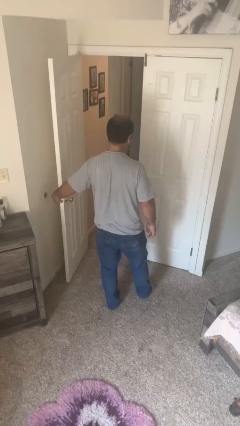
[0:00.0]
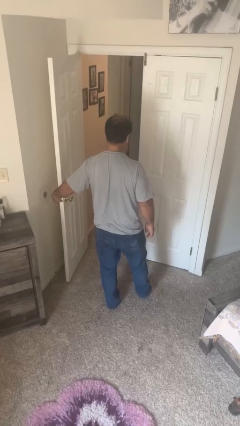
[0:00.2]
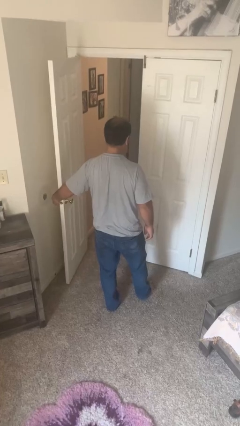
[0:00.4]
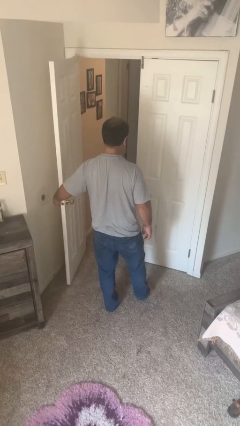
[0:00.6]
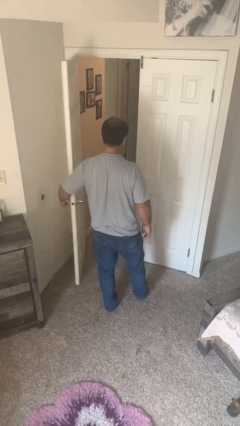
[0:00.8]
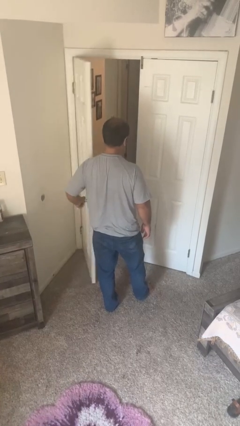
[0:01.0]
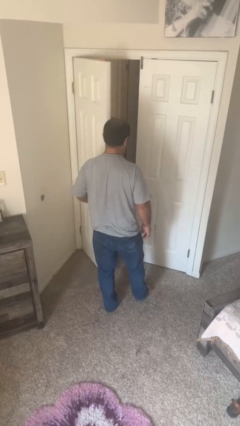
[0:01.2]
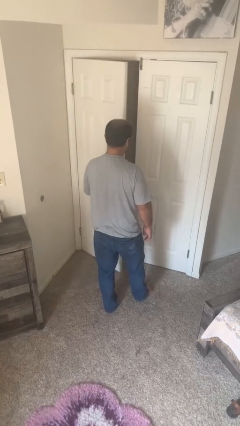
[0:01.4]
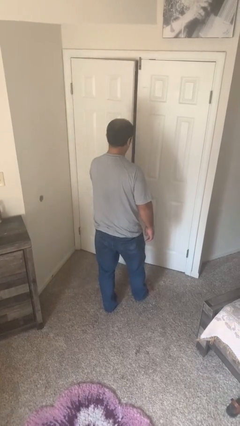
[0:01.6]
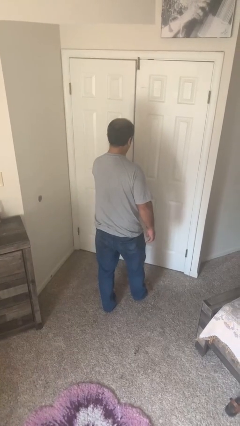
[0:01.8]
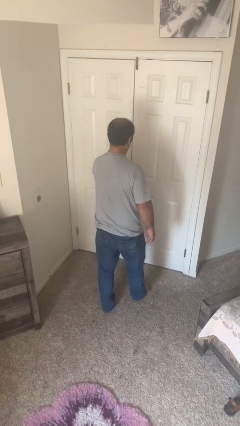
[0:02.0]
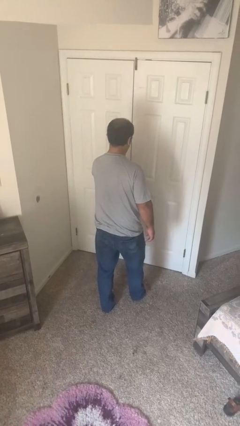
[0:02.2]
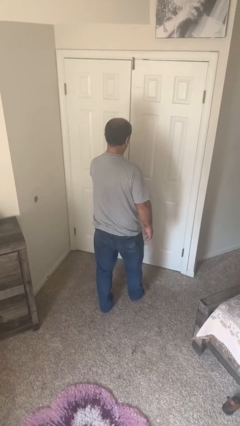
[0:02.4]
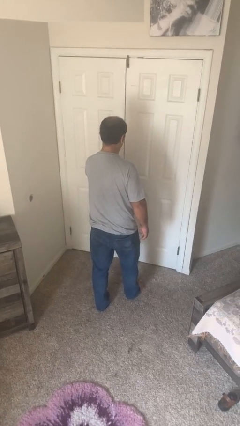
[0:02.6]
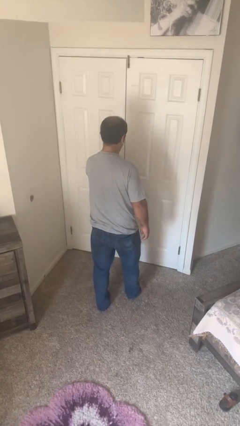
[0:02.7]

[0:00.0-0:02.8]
person closes facility door

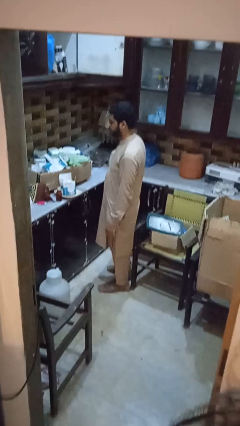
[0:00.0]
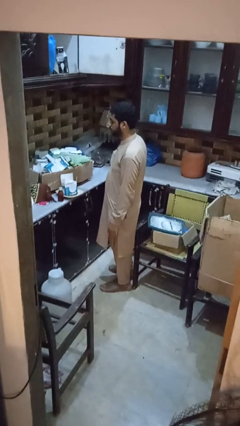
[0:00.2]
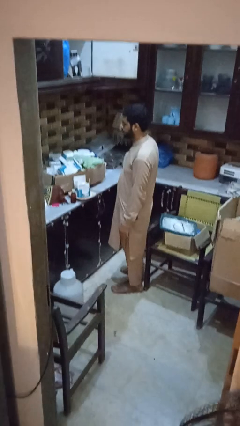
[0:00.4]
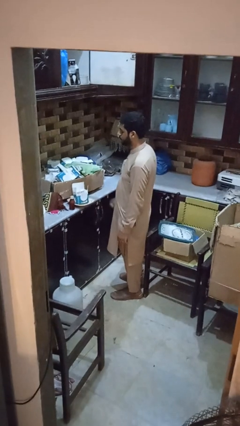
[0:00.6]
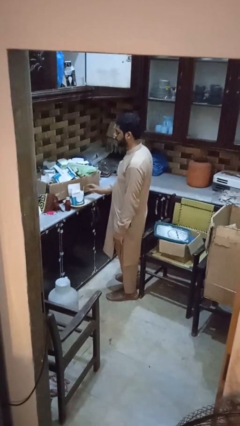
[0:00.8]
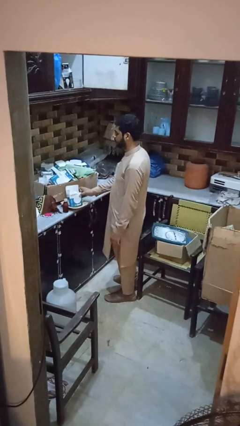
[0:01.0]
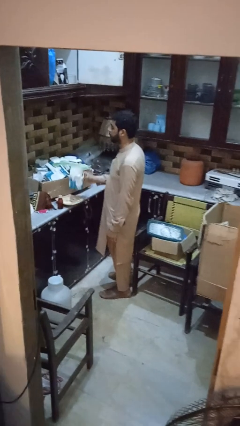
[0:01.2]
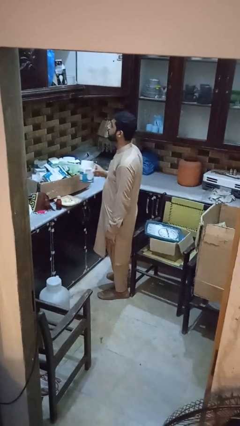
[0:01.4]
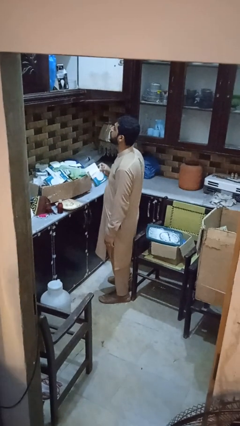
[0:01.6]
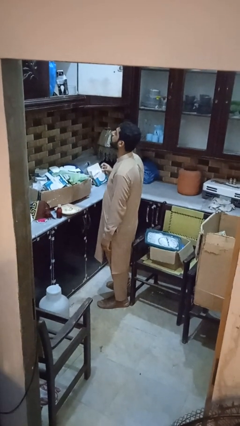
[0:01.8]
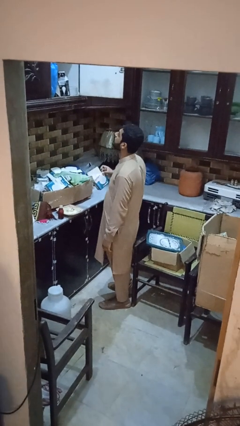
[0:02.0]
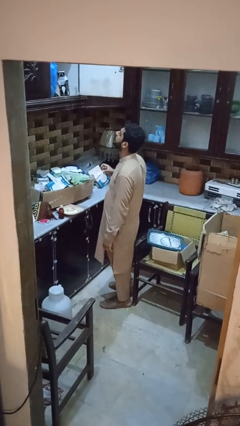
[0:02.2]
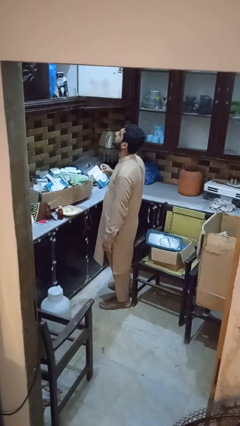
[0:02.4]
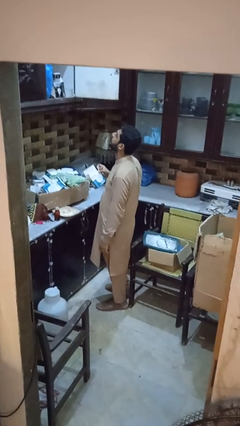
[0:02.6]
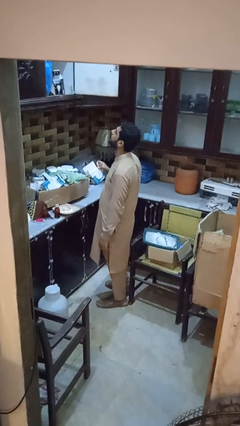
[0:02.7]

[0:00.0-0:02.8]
person puts object in cabinet

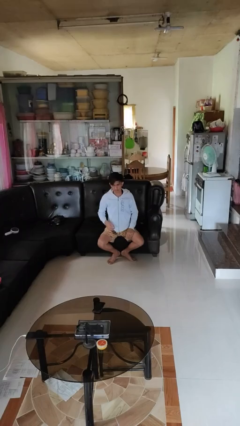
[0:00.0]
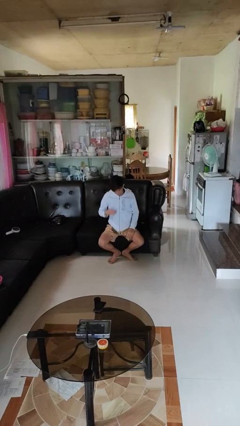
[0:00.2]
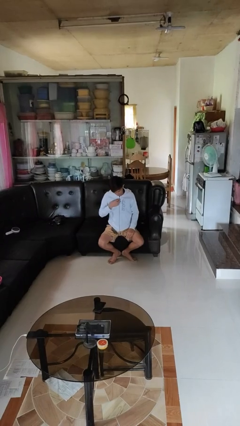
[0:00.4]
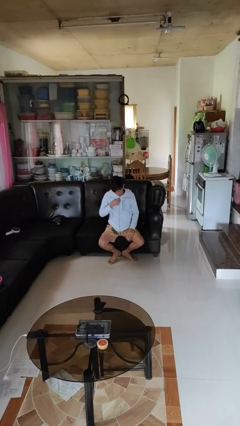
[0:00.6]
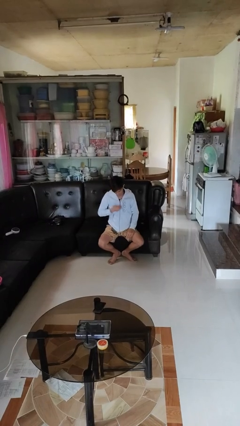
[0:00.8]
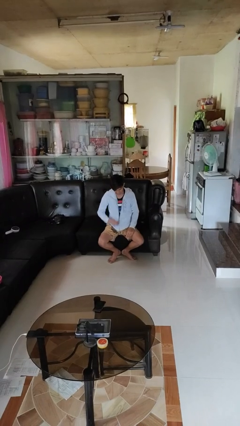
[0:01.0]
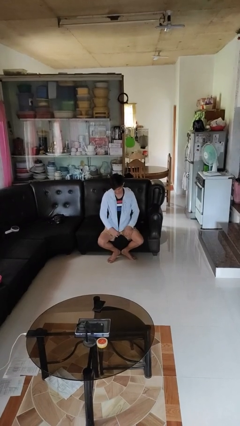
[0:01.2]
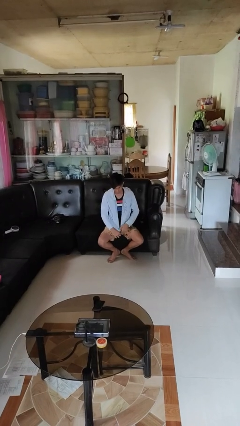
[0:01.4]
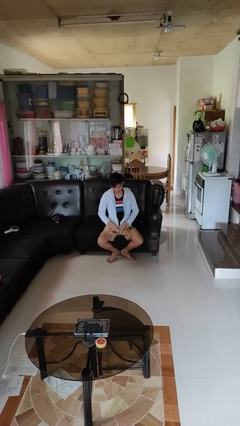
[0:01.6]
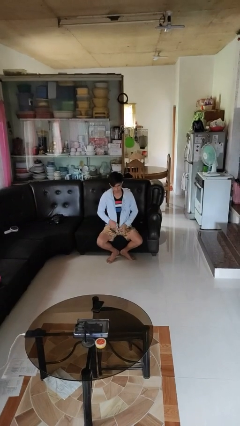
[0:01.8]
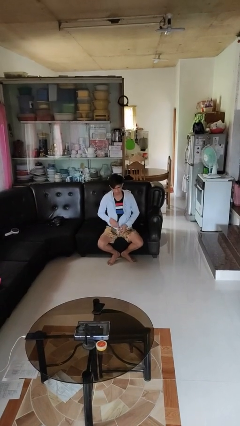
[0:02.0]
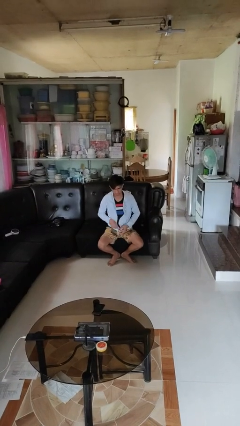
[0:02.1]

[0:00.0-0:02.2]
person unzips jacket

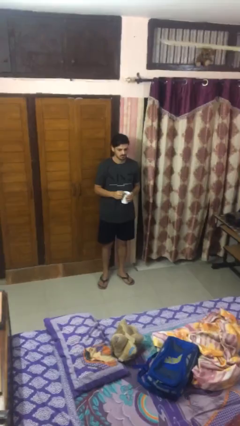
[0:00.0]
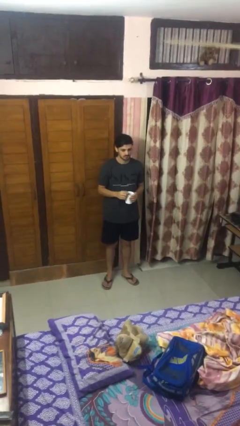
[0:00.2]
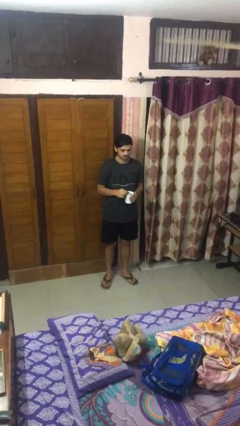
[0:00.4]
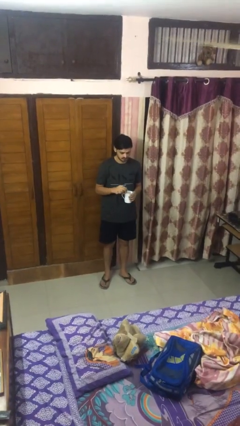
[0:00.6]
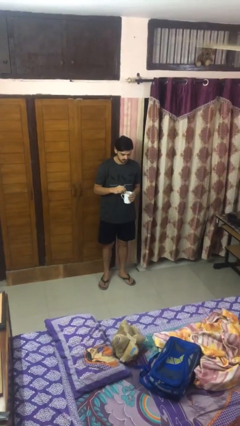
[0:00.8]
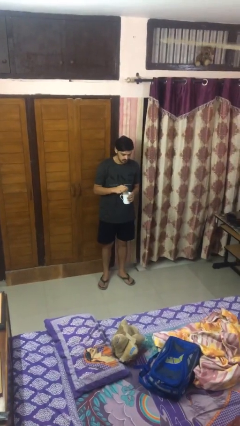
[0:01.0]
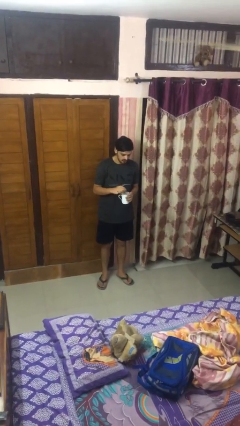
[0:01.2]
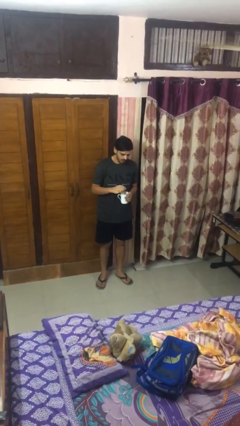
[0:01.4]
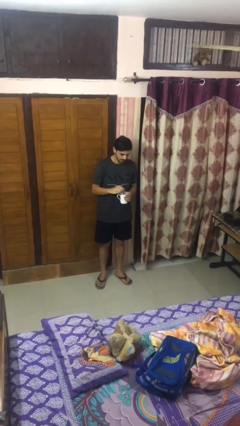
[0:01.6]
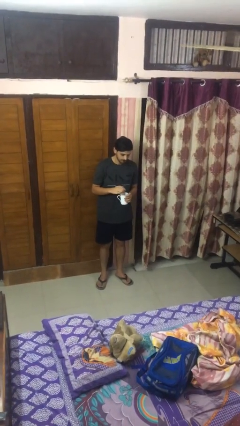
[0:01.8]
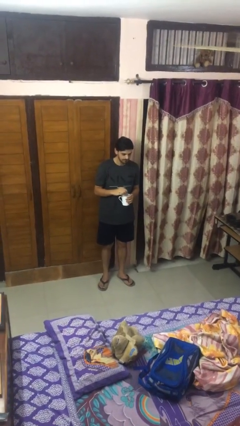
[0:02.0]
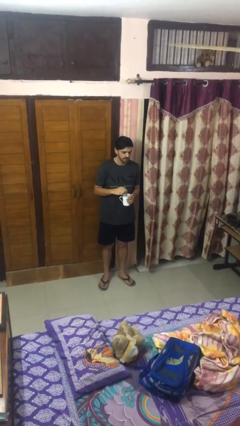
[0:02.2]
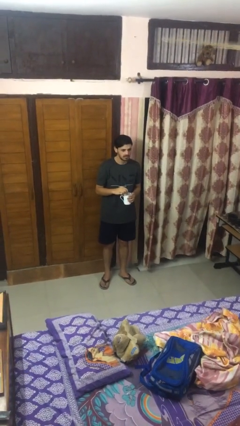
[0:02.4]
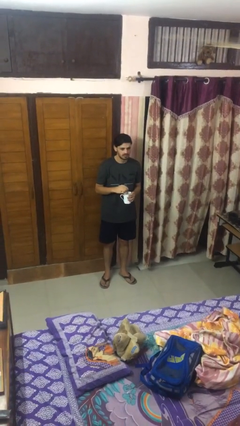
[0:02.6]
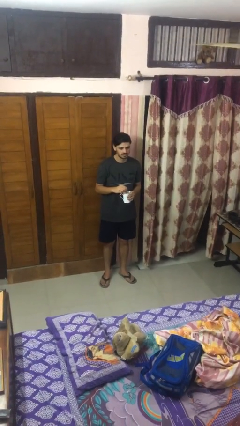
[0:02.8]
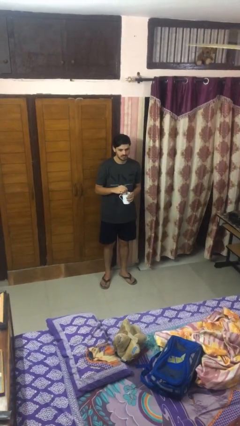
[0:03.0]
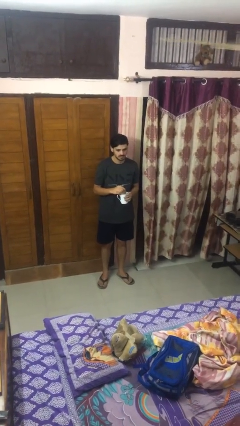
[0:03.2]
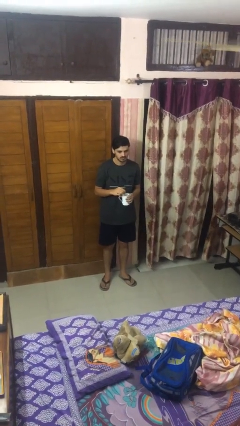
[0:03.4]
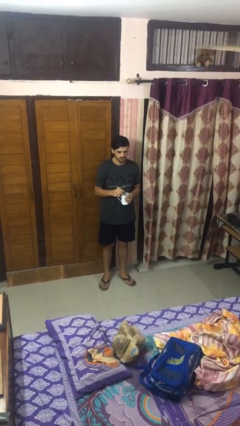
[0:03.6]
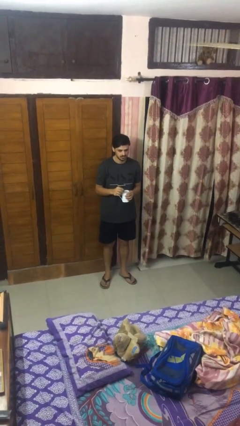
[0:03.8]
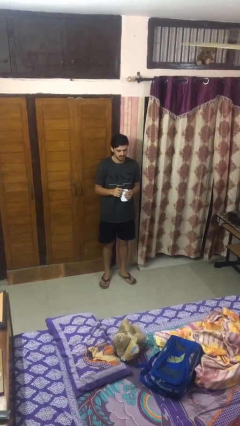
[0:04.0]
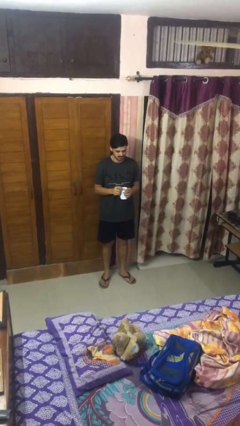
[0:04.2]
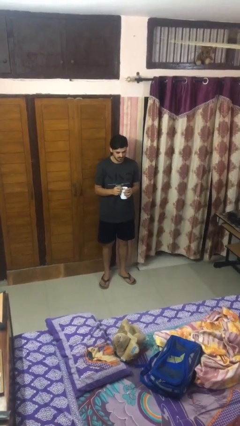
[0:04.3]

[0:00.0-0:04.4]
person stirs mug

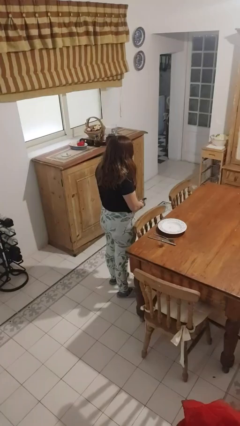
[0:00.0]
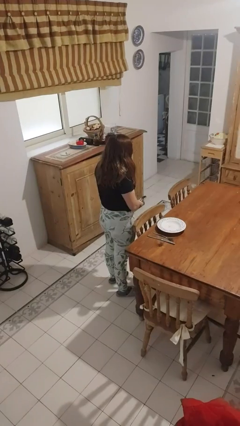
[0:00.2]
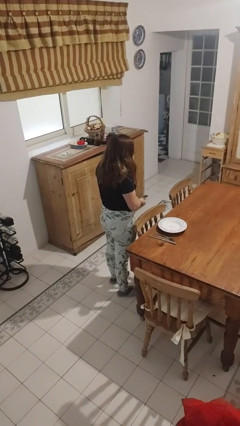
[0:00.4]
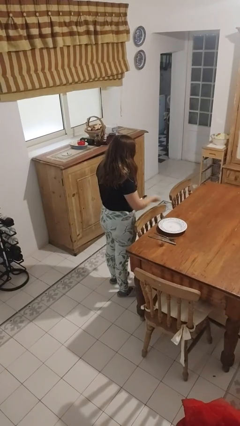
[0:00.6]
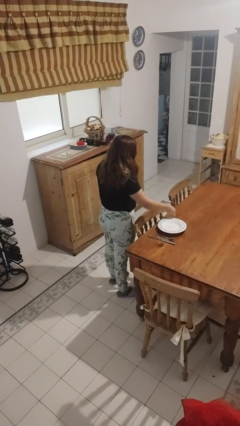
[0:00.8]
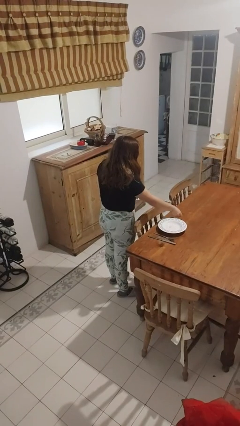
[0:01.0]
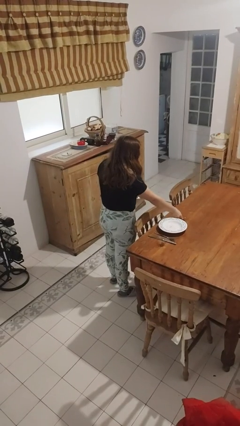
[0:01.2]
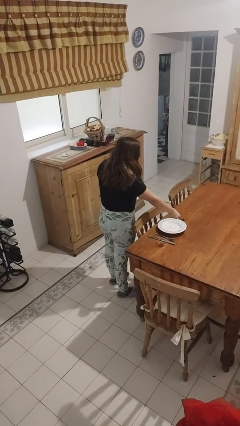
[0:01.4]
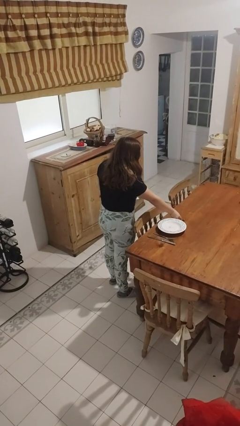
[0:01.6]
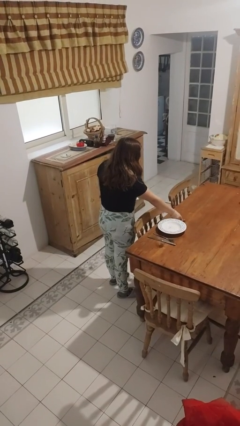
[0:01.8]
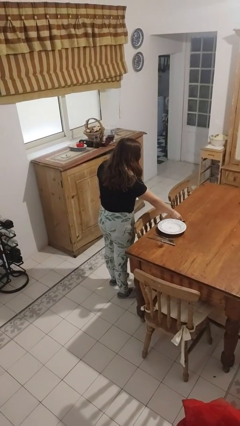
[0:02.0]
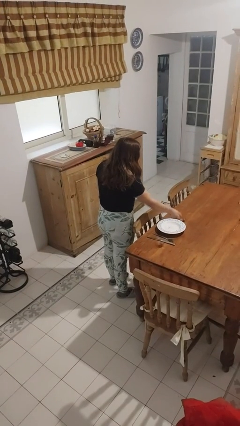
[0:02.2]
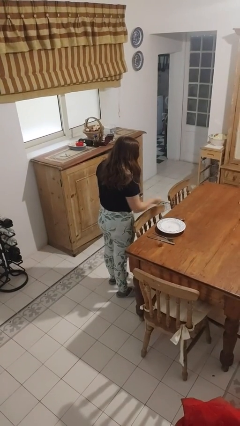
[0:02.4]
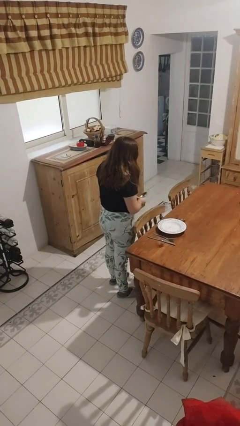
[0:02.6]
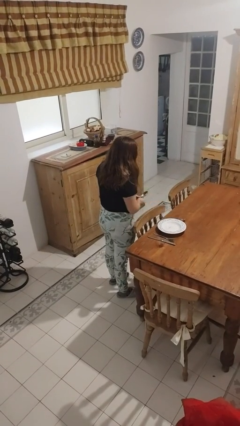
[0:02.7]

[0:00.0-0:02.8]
person sets table

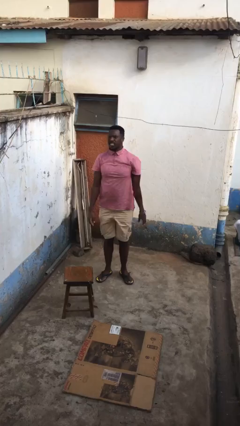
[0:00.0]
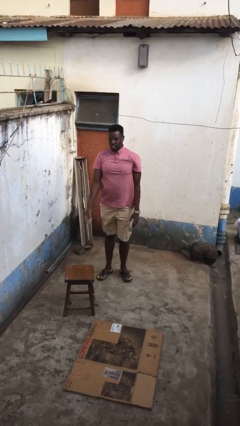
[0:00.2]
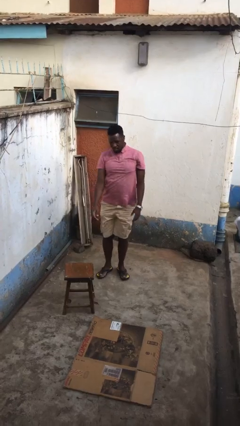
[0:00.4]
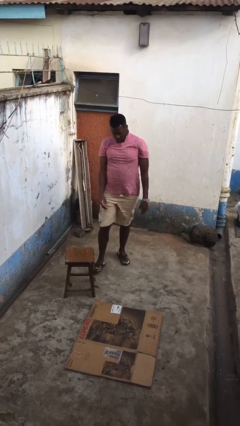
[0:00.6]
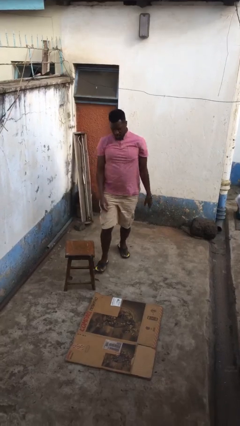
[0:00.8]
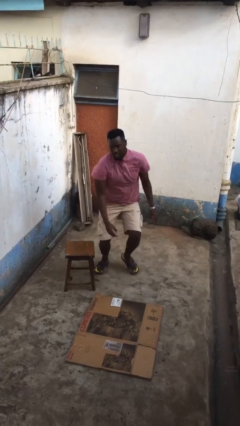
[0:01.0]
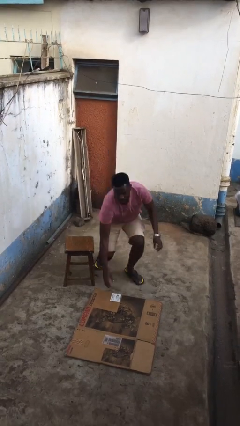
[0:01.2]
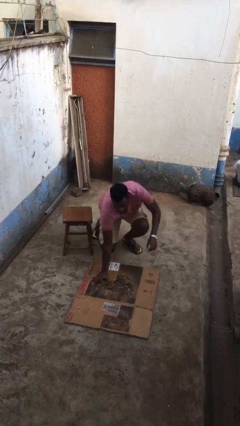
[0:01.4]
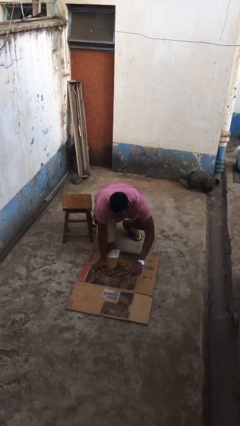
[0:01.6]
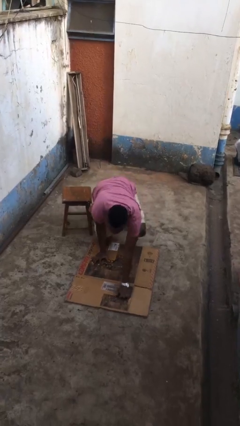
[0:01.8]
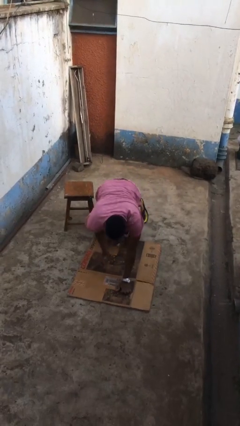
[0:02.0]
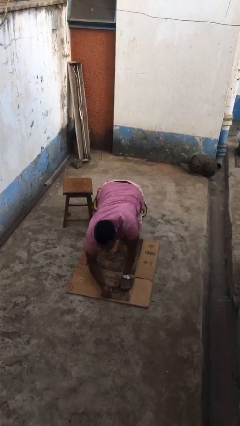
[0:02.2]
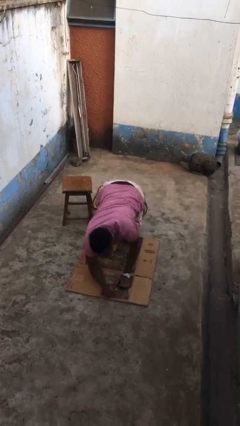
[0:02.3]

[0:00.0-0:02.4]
person trips on object on floor
